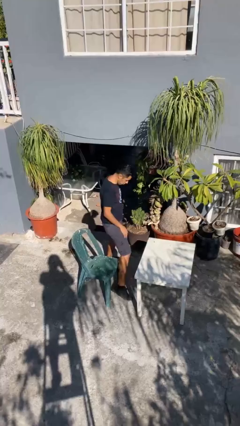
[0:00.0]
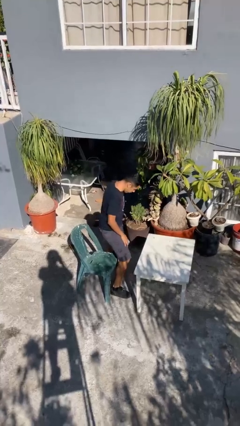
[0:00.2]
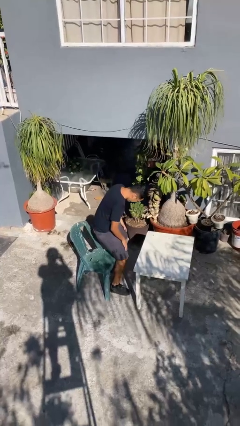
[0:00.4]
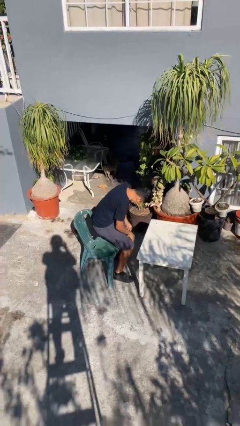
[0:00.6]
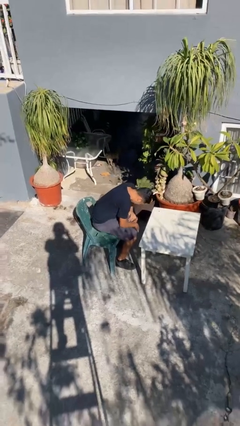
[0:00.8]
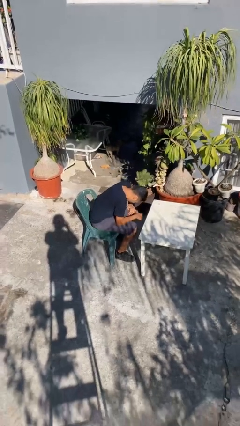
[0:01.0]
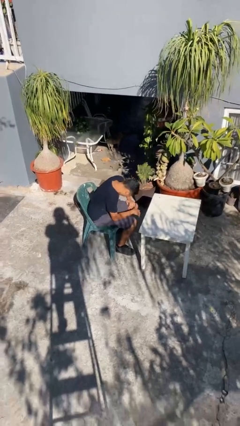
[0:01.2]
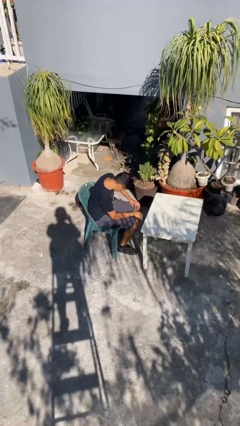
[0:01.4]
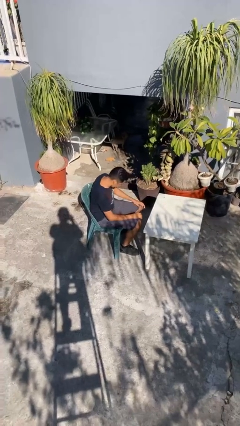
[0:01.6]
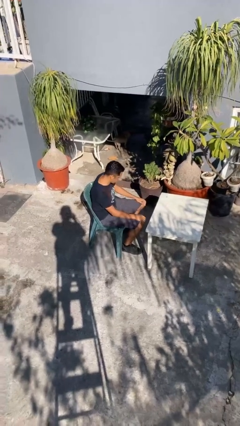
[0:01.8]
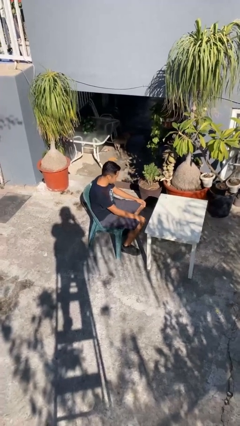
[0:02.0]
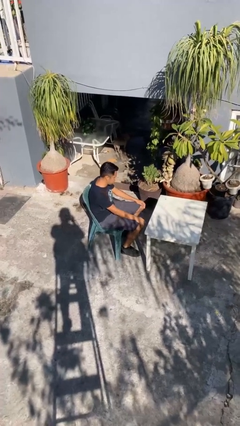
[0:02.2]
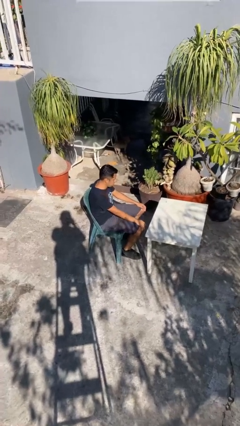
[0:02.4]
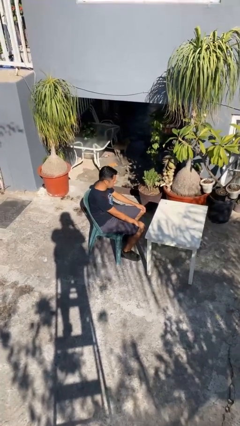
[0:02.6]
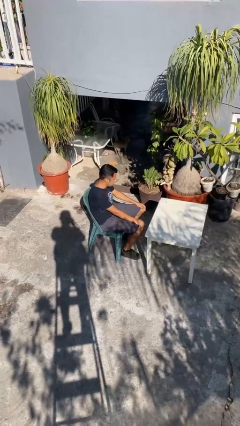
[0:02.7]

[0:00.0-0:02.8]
person sits down

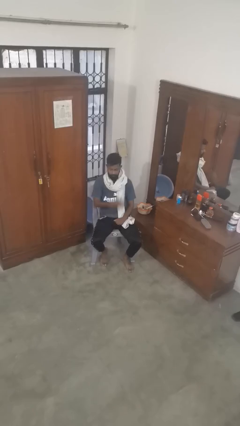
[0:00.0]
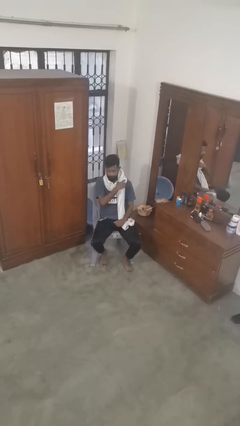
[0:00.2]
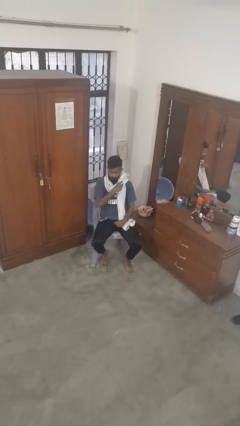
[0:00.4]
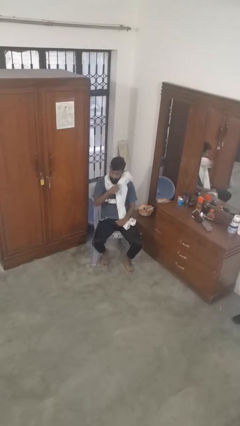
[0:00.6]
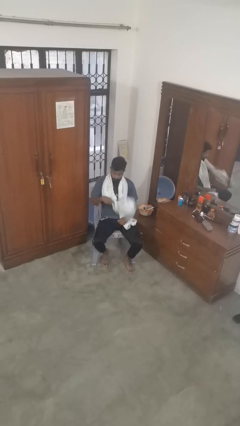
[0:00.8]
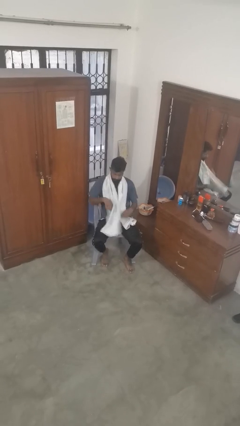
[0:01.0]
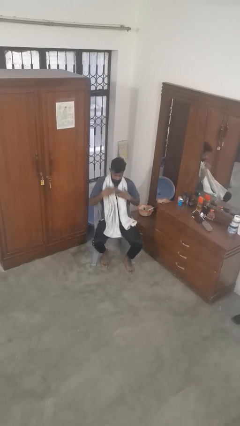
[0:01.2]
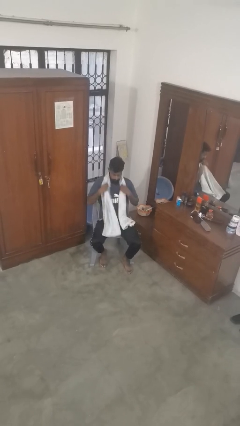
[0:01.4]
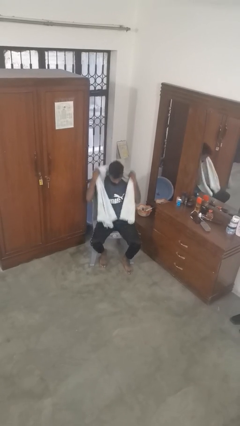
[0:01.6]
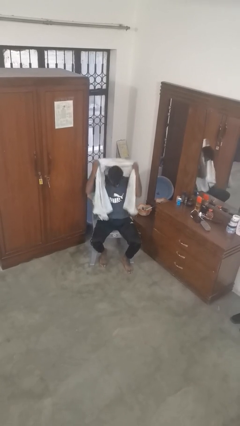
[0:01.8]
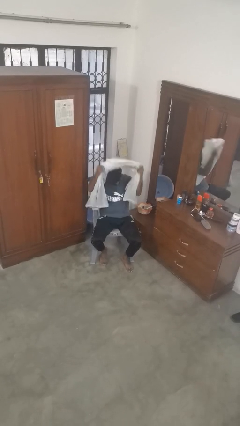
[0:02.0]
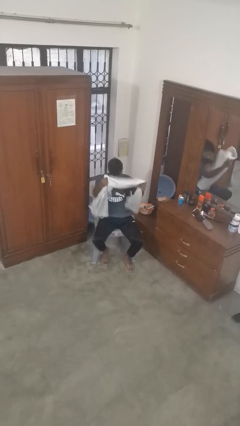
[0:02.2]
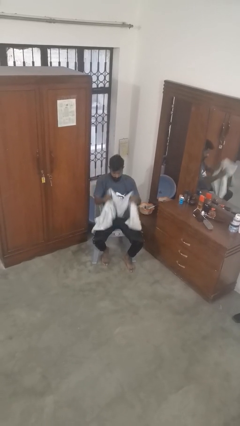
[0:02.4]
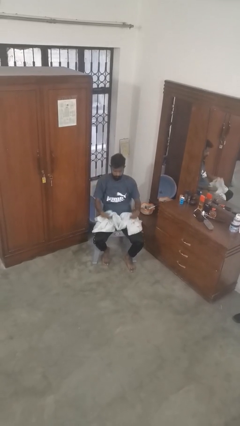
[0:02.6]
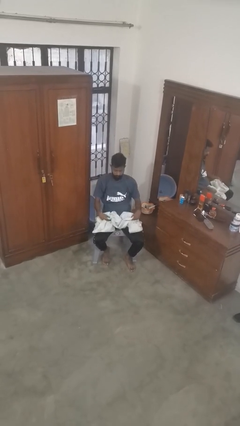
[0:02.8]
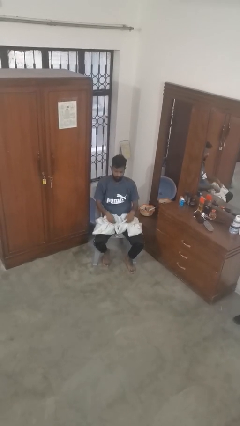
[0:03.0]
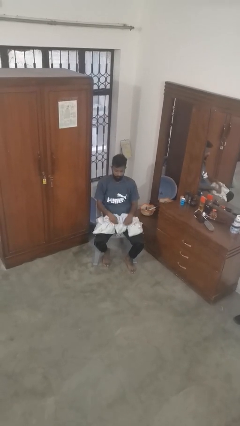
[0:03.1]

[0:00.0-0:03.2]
person takes off scarf

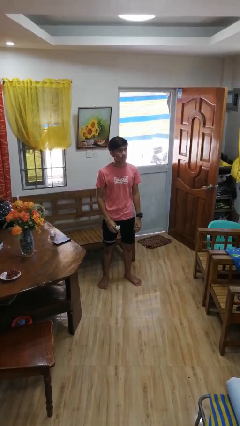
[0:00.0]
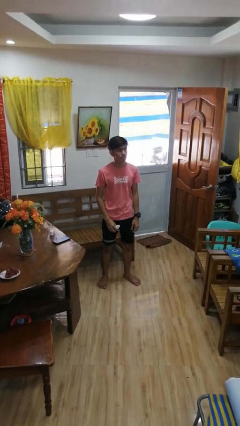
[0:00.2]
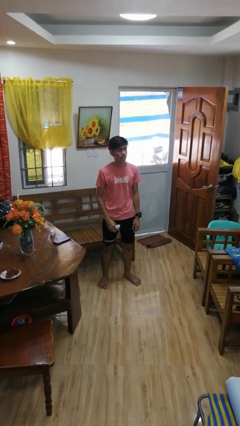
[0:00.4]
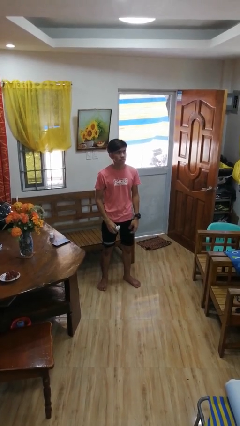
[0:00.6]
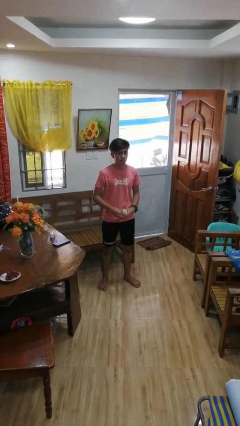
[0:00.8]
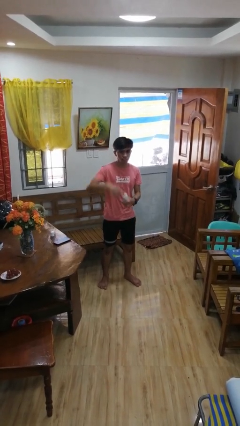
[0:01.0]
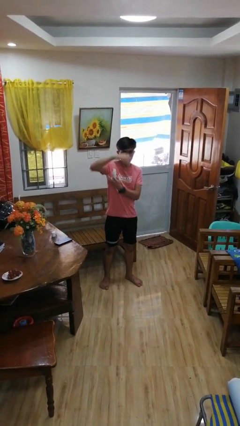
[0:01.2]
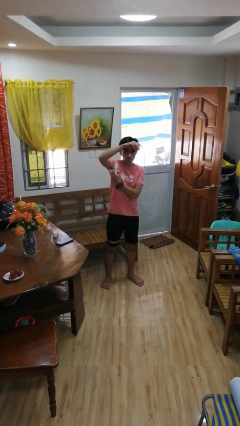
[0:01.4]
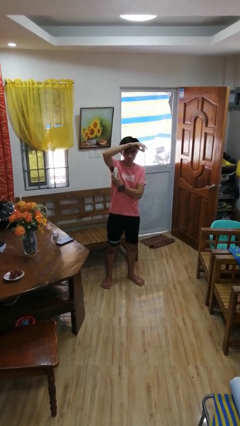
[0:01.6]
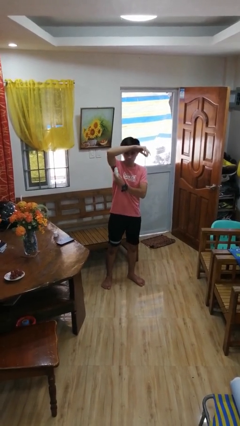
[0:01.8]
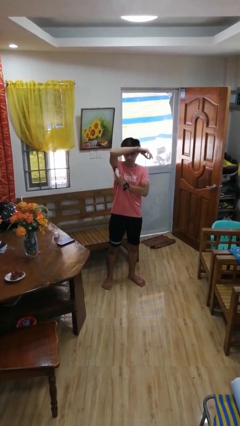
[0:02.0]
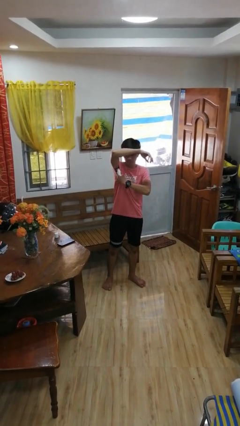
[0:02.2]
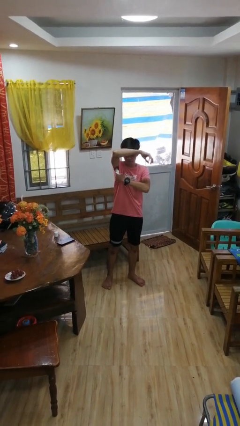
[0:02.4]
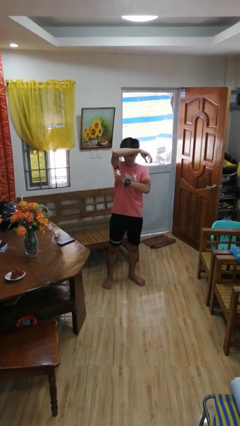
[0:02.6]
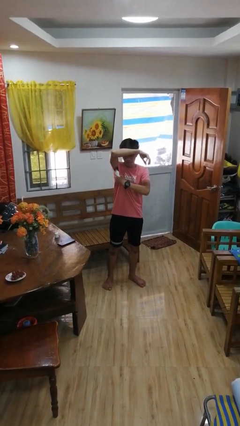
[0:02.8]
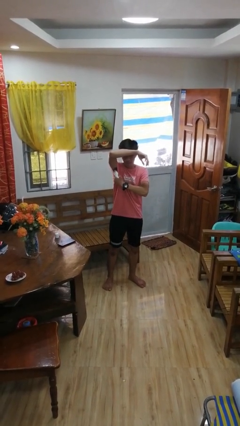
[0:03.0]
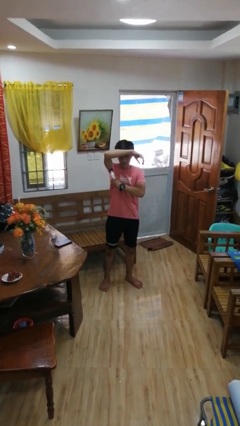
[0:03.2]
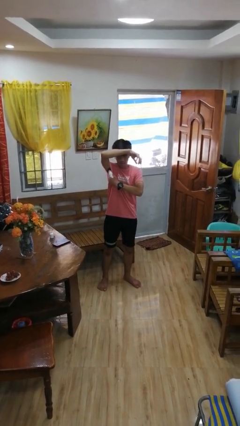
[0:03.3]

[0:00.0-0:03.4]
person applies deodorant

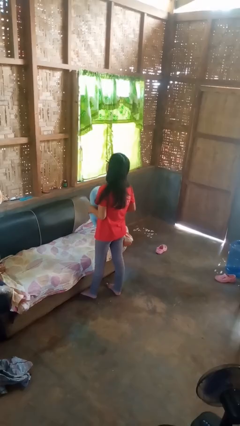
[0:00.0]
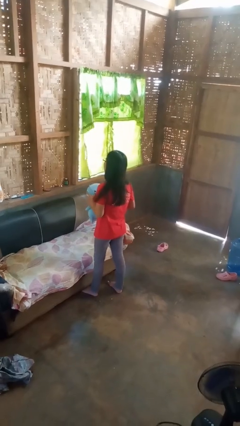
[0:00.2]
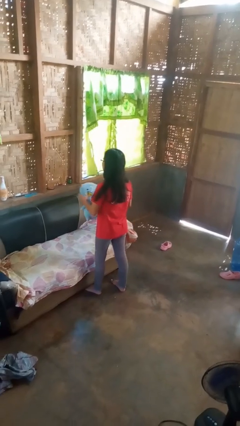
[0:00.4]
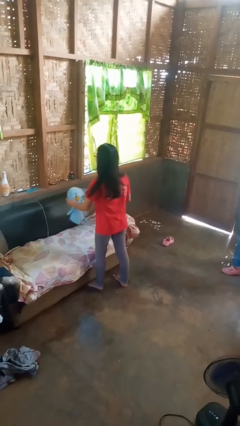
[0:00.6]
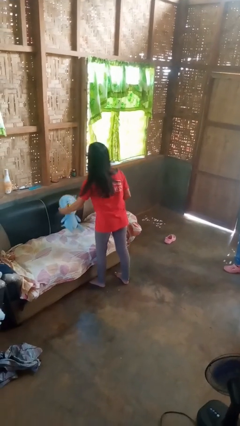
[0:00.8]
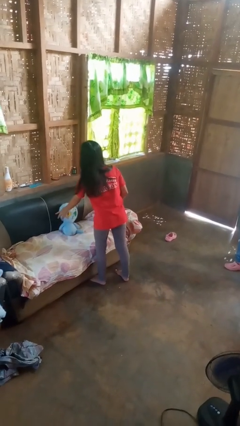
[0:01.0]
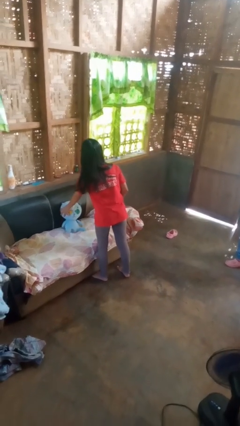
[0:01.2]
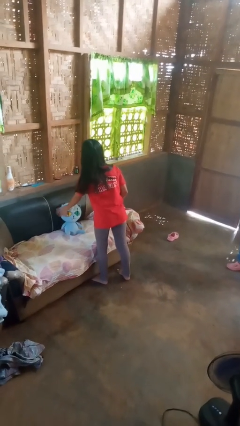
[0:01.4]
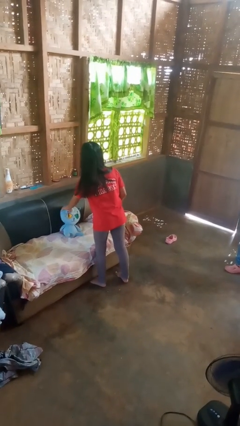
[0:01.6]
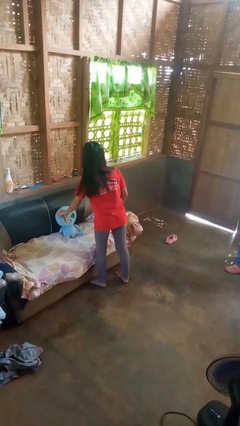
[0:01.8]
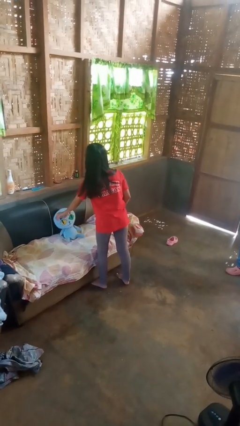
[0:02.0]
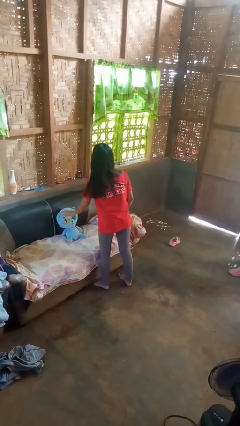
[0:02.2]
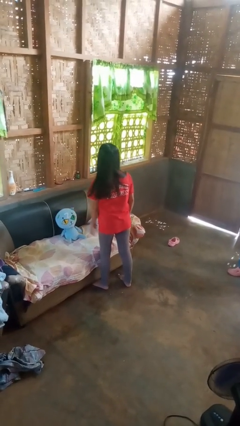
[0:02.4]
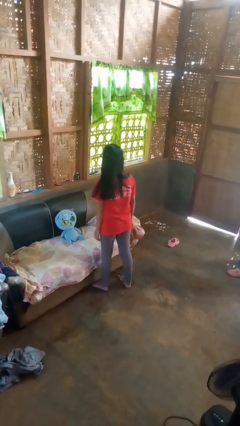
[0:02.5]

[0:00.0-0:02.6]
person puts down object on couch

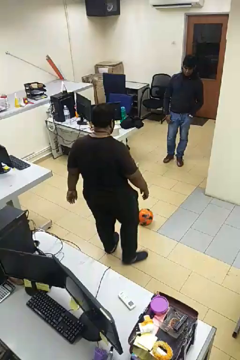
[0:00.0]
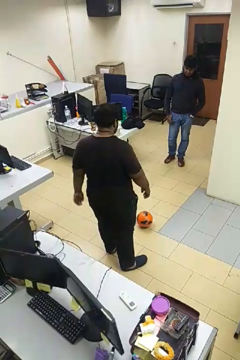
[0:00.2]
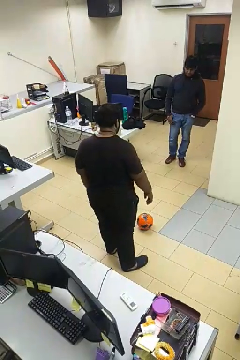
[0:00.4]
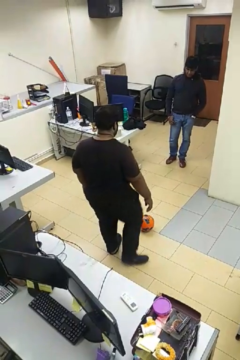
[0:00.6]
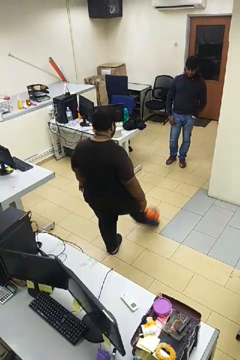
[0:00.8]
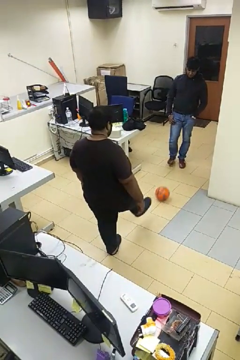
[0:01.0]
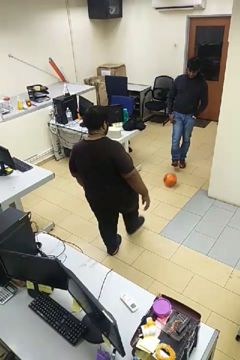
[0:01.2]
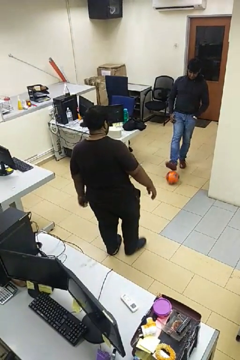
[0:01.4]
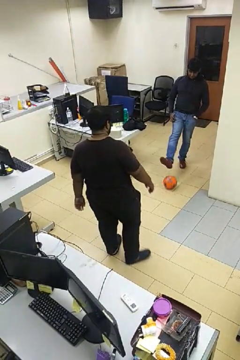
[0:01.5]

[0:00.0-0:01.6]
person kicks object to person

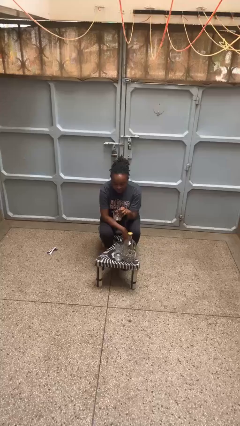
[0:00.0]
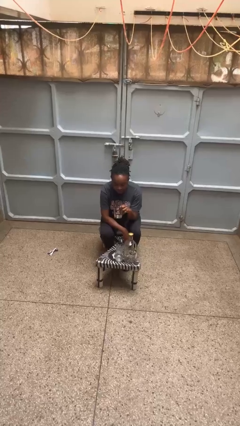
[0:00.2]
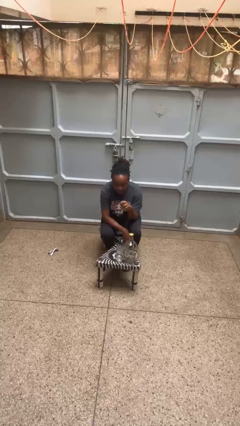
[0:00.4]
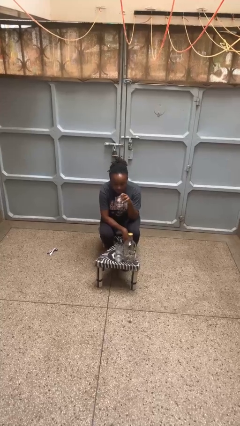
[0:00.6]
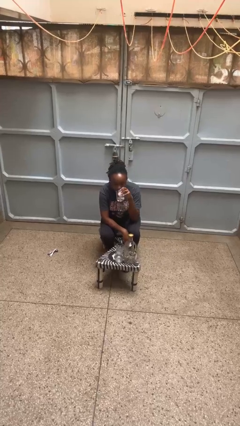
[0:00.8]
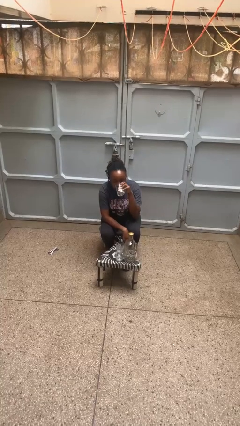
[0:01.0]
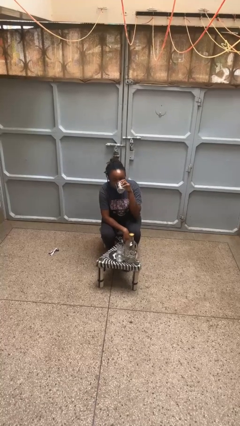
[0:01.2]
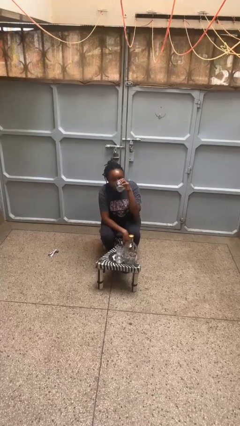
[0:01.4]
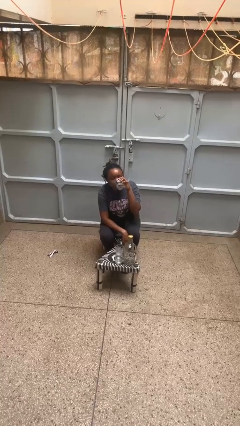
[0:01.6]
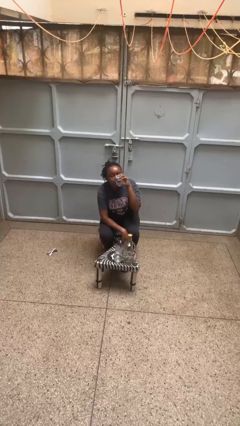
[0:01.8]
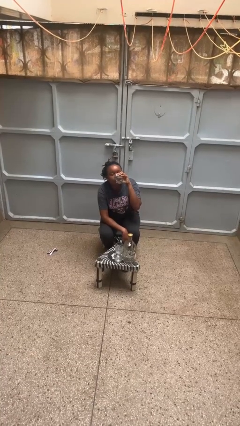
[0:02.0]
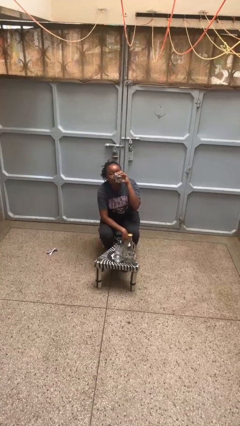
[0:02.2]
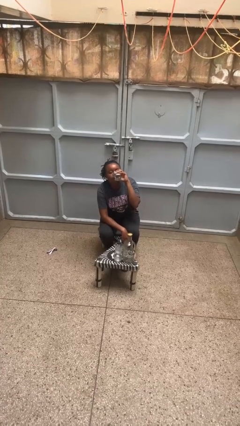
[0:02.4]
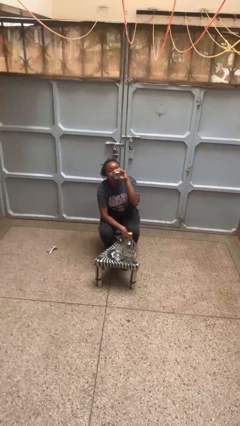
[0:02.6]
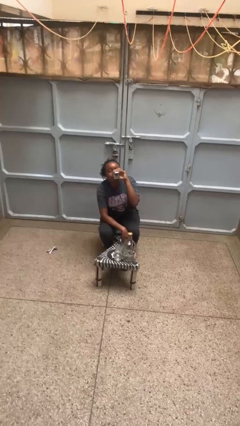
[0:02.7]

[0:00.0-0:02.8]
person drinks from shotglass

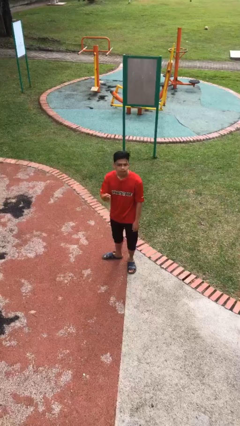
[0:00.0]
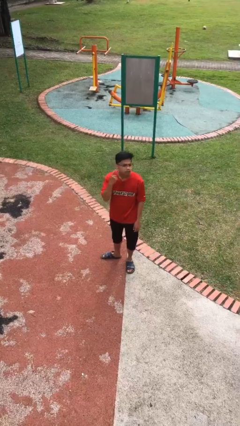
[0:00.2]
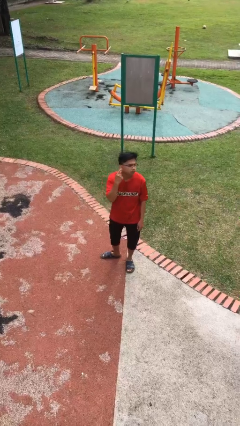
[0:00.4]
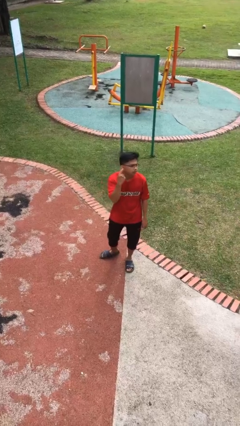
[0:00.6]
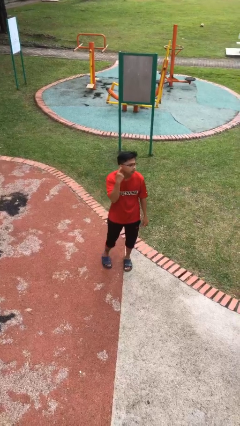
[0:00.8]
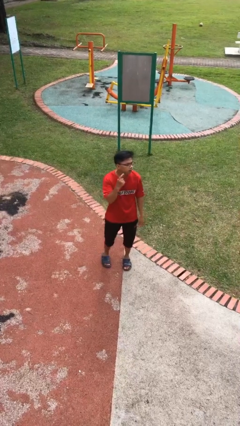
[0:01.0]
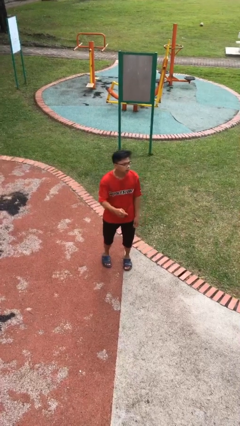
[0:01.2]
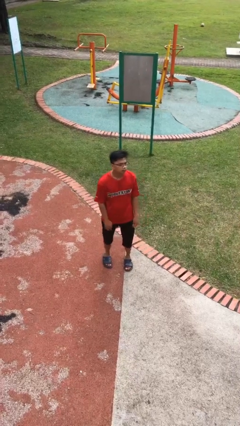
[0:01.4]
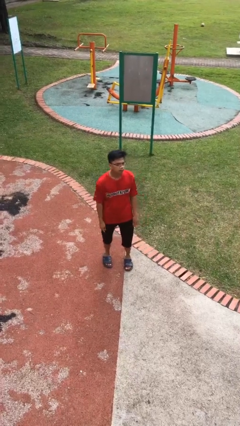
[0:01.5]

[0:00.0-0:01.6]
person gestures listen closely
